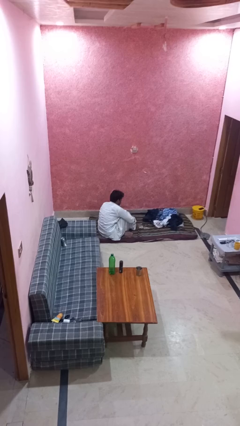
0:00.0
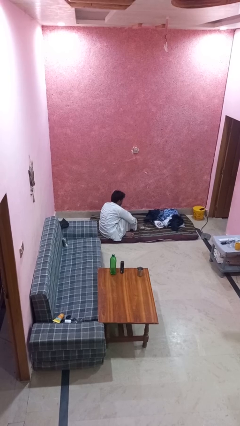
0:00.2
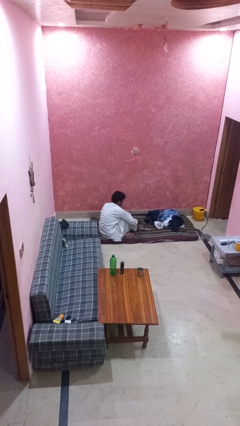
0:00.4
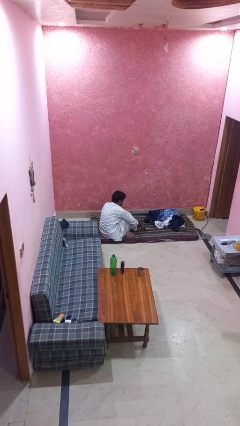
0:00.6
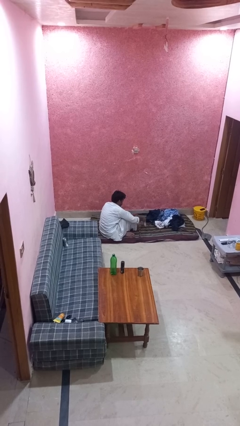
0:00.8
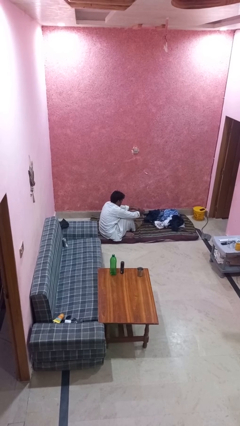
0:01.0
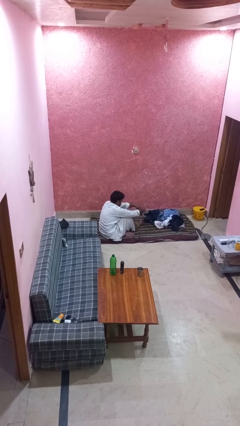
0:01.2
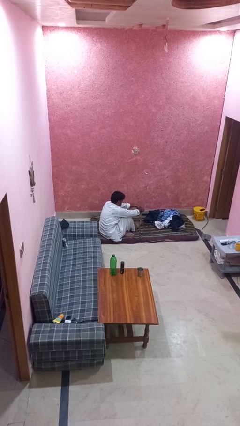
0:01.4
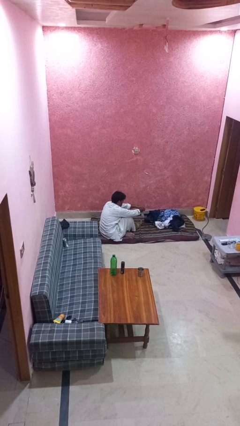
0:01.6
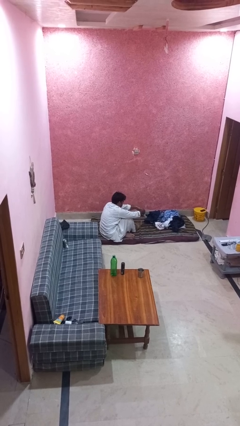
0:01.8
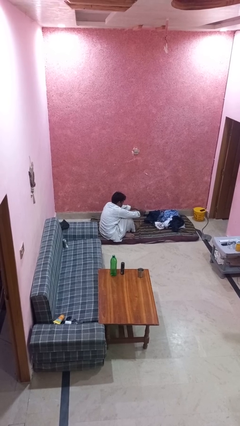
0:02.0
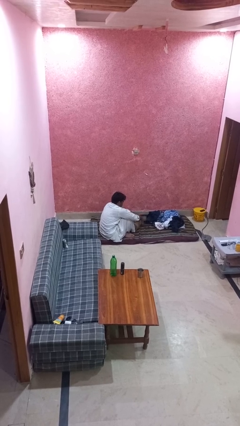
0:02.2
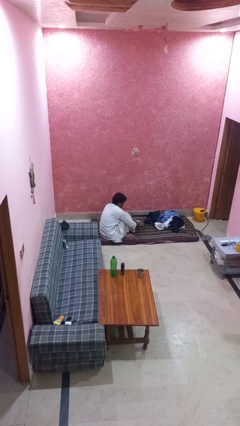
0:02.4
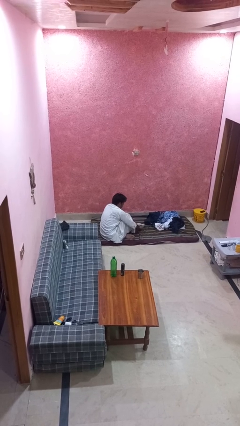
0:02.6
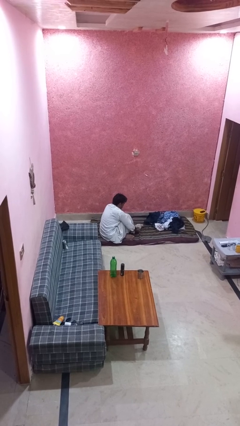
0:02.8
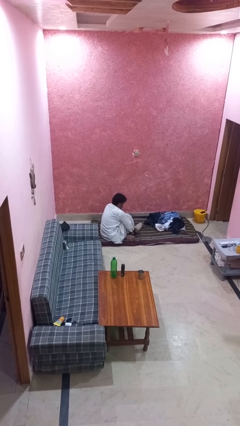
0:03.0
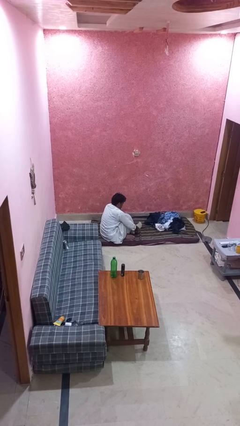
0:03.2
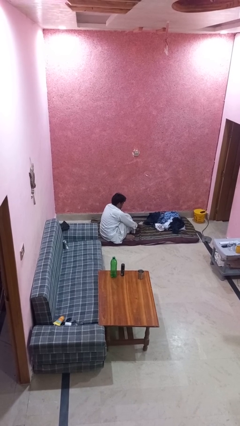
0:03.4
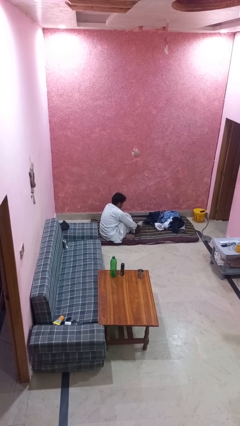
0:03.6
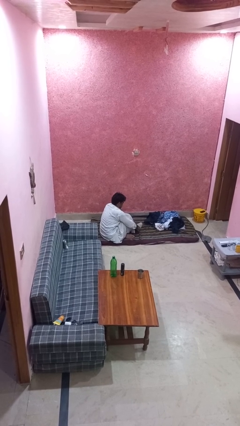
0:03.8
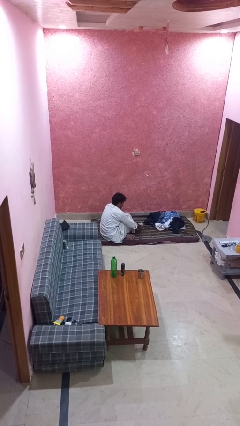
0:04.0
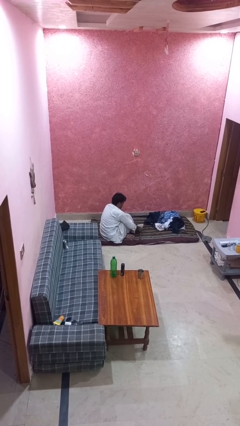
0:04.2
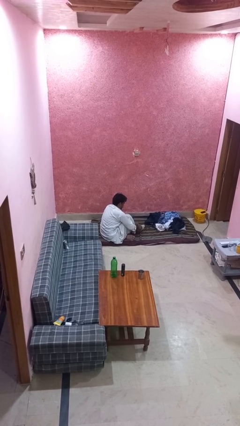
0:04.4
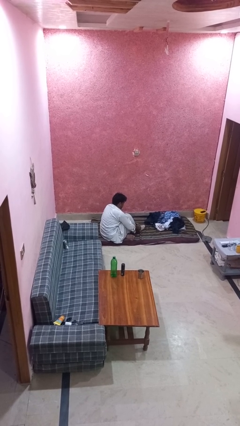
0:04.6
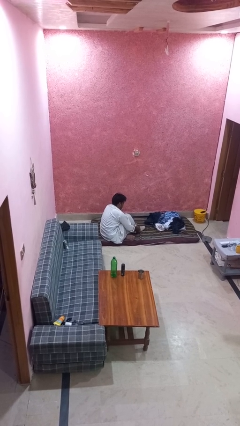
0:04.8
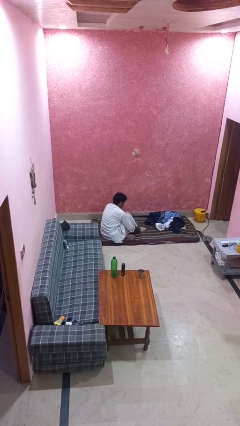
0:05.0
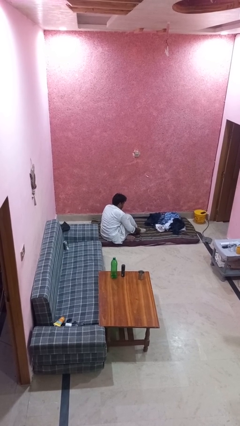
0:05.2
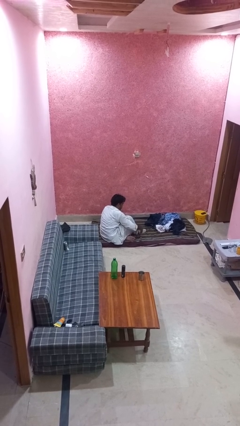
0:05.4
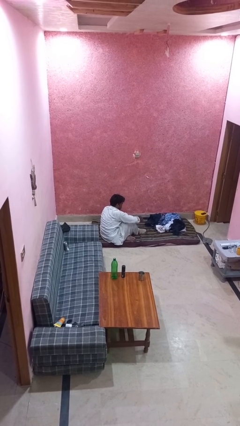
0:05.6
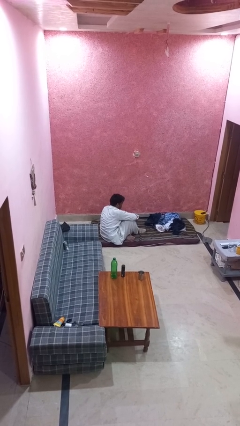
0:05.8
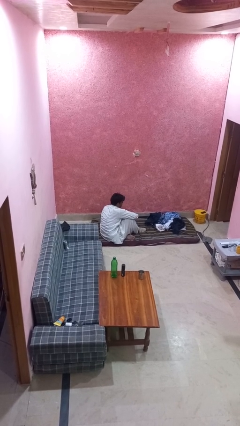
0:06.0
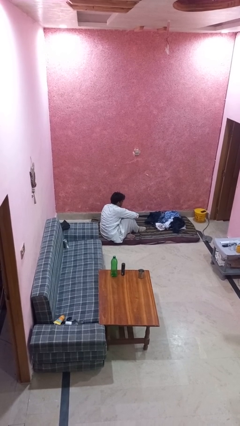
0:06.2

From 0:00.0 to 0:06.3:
person puts on socks

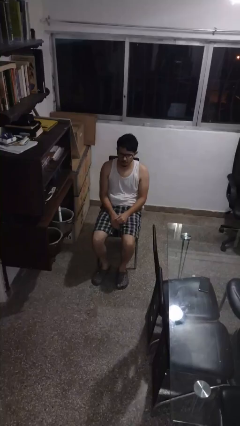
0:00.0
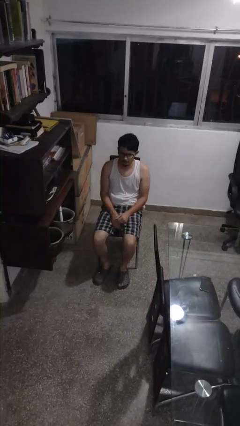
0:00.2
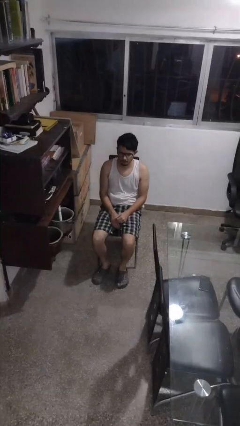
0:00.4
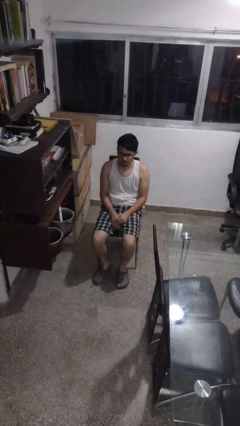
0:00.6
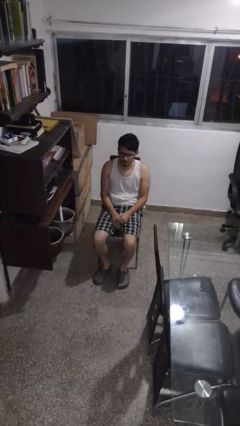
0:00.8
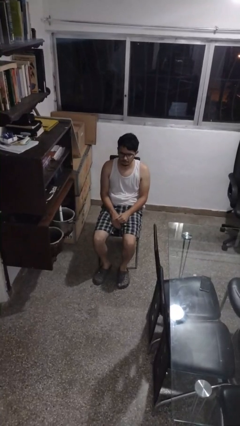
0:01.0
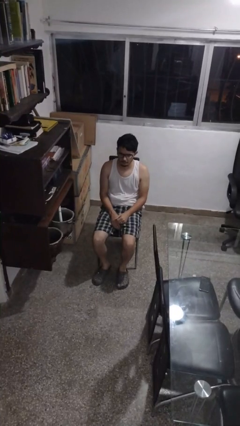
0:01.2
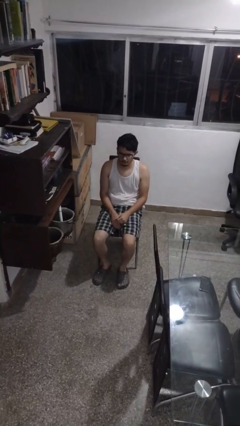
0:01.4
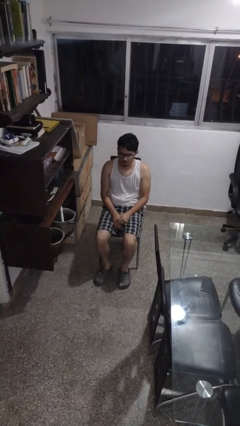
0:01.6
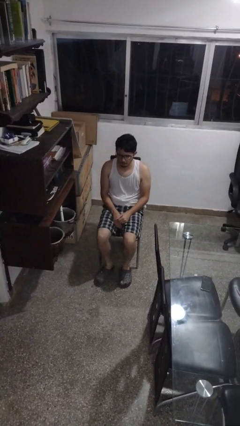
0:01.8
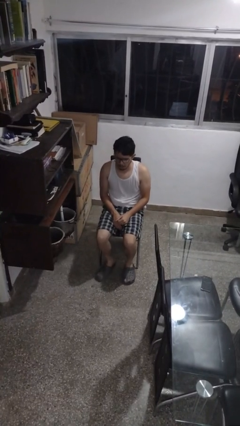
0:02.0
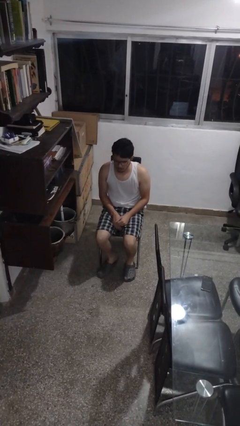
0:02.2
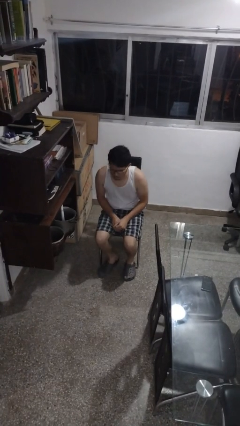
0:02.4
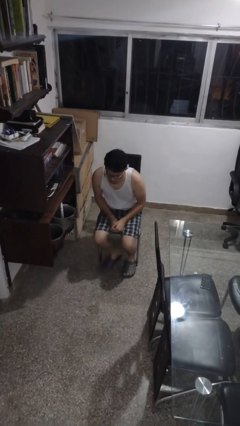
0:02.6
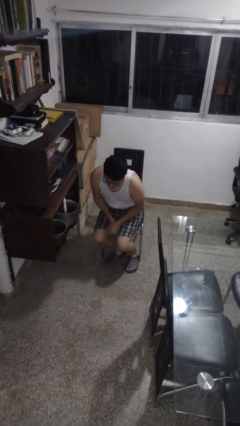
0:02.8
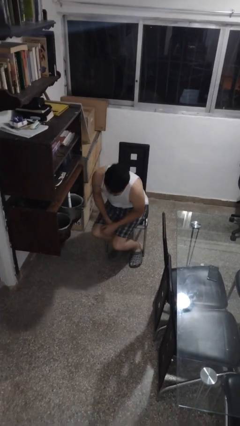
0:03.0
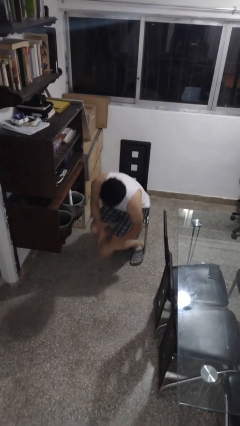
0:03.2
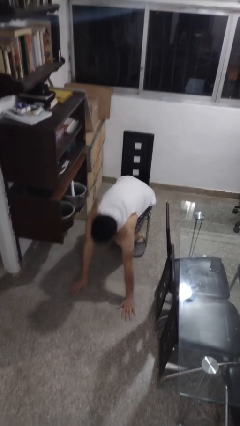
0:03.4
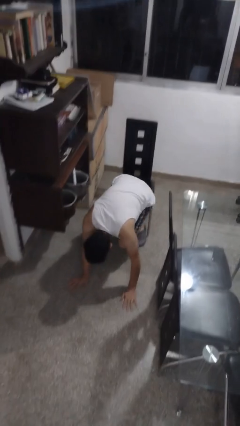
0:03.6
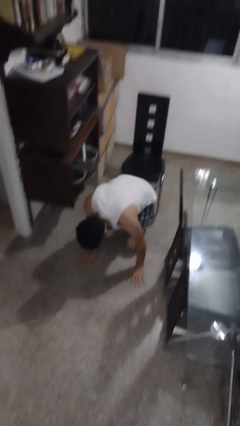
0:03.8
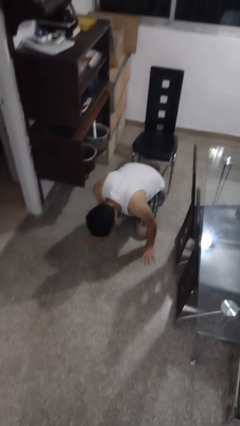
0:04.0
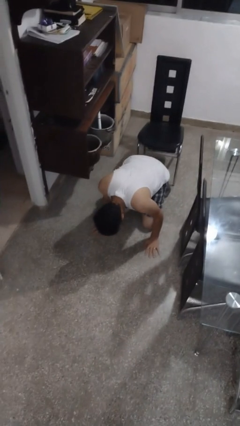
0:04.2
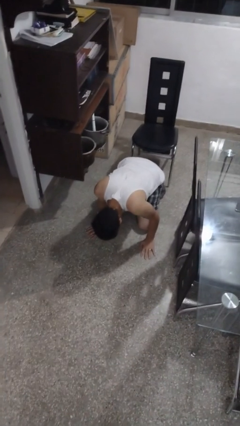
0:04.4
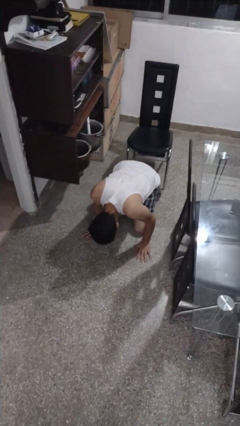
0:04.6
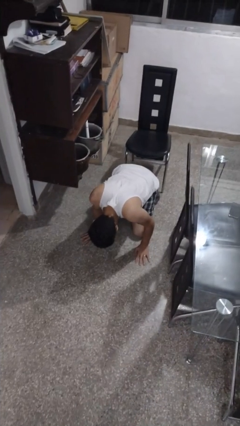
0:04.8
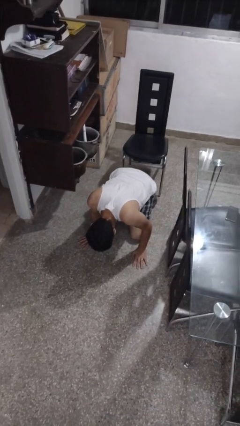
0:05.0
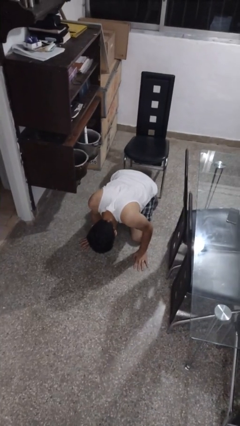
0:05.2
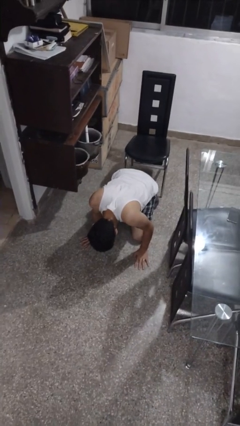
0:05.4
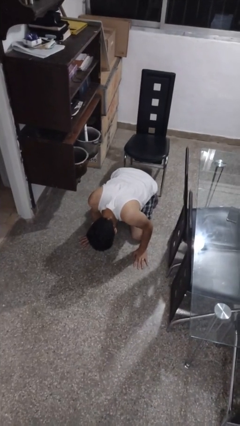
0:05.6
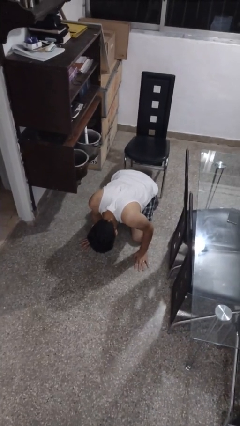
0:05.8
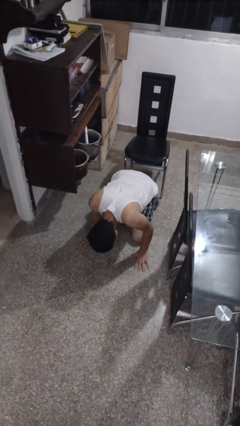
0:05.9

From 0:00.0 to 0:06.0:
person falls from chair

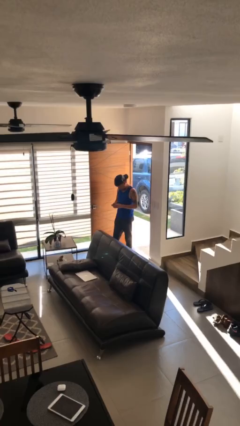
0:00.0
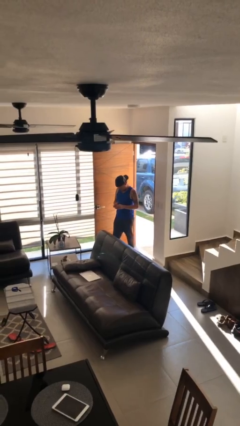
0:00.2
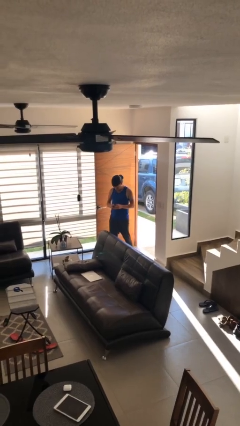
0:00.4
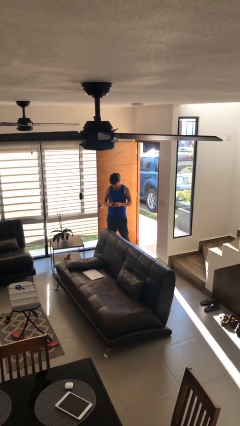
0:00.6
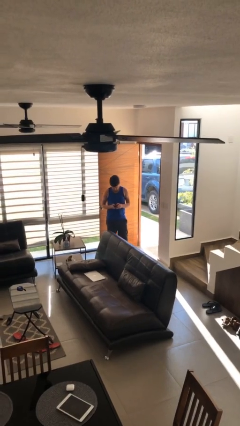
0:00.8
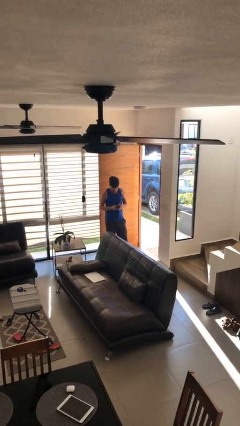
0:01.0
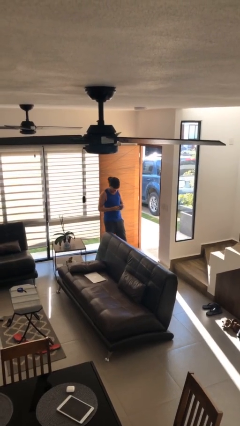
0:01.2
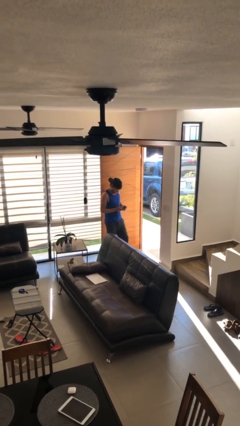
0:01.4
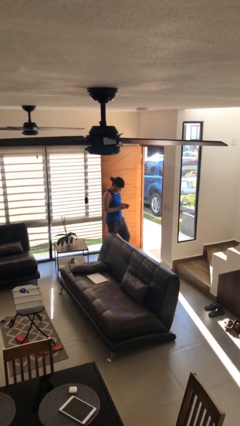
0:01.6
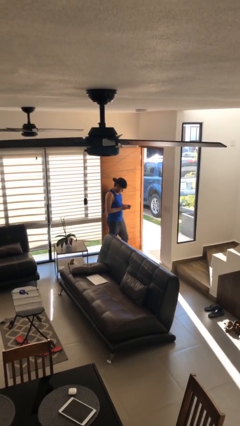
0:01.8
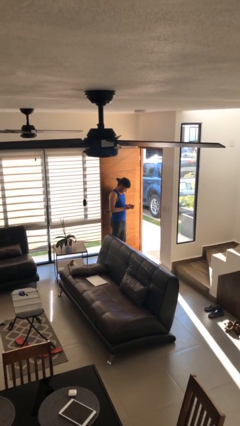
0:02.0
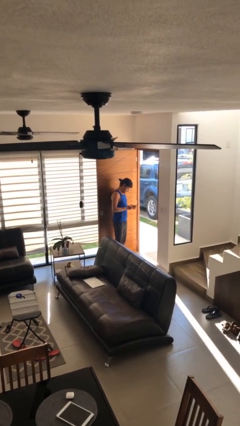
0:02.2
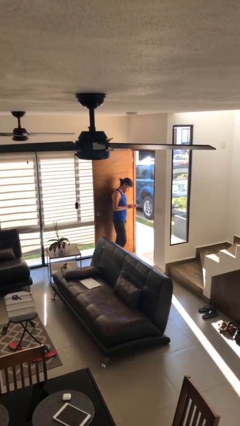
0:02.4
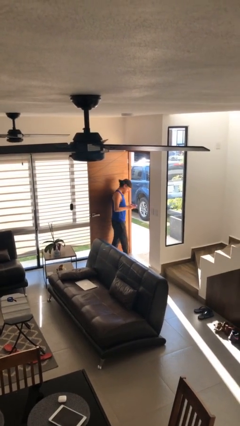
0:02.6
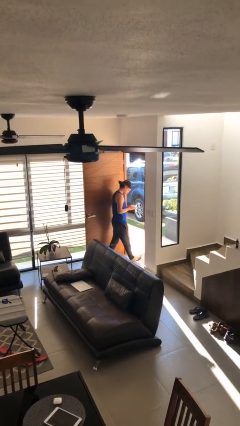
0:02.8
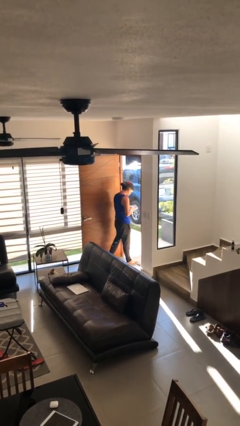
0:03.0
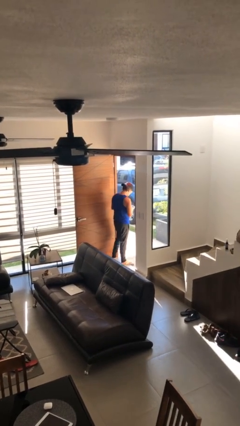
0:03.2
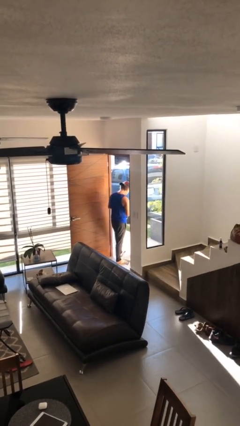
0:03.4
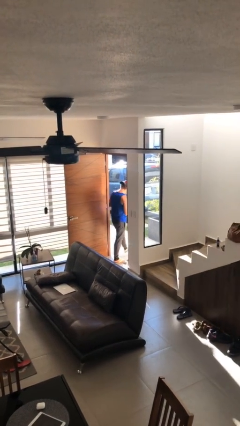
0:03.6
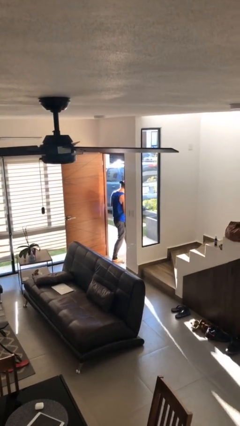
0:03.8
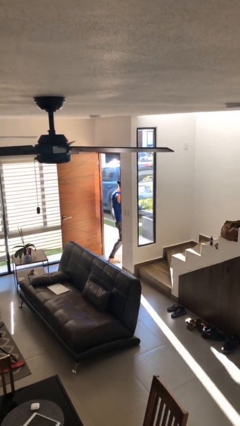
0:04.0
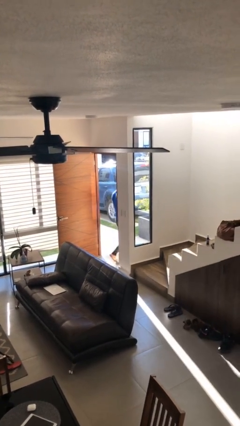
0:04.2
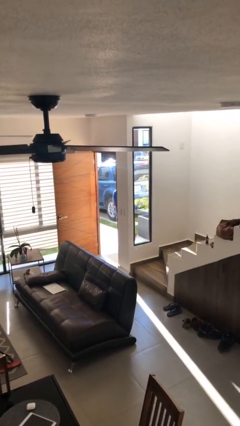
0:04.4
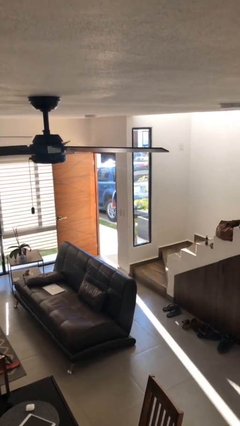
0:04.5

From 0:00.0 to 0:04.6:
person exits scene through structure

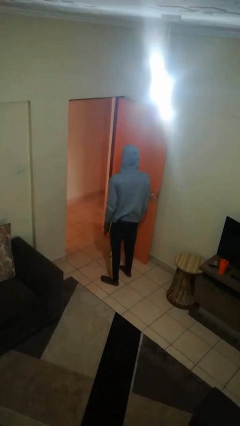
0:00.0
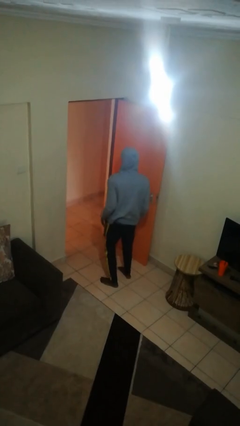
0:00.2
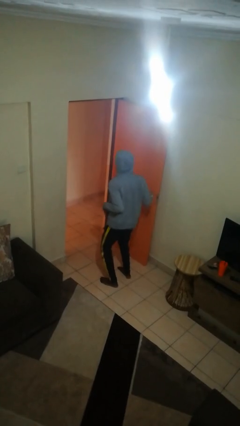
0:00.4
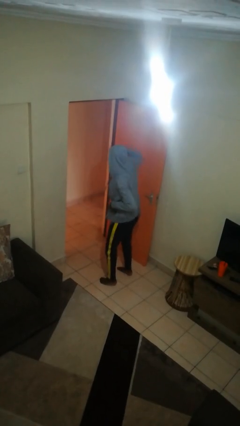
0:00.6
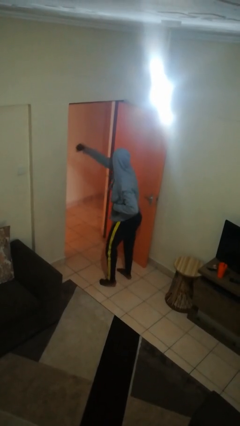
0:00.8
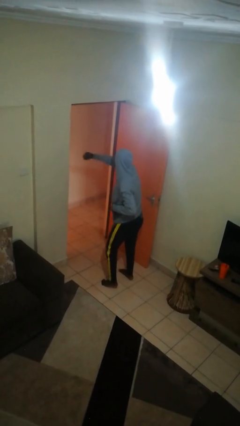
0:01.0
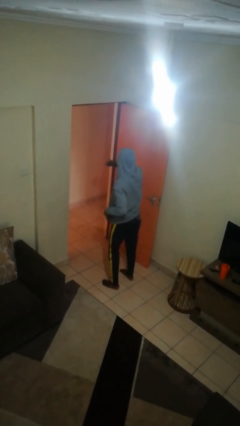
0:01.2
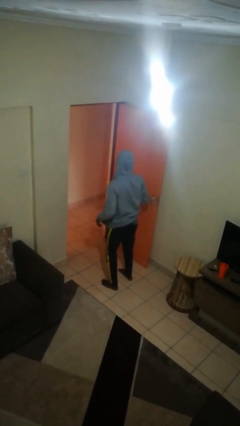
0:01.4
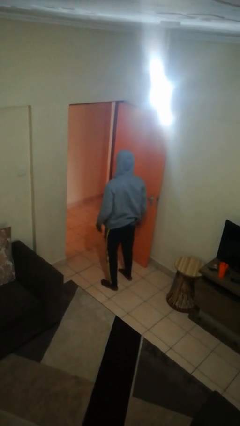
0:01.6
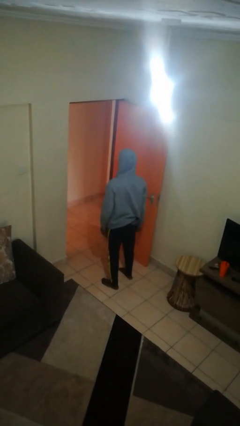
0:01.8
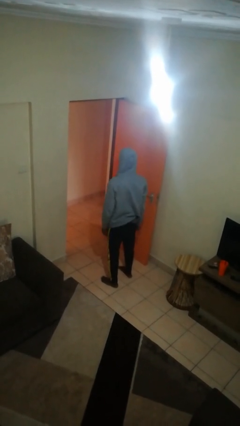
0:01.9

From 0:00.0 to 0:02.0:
person punches
